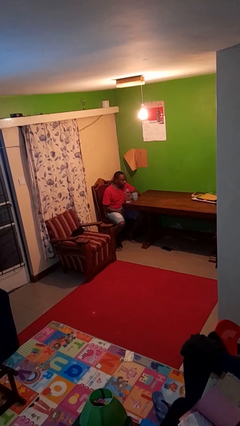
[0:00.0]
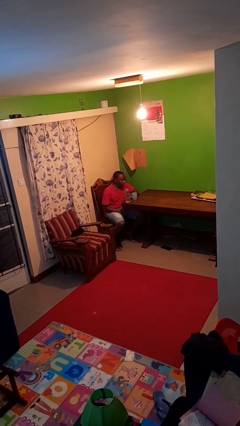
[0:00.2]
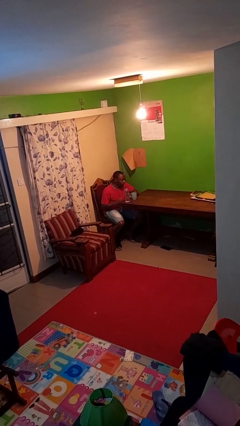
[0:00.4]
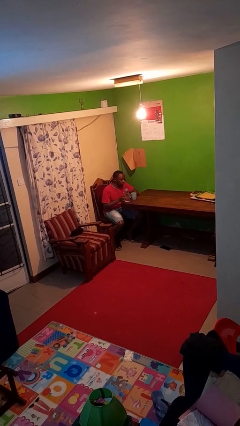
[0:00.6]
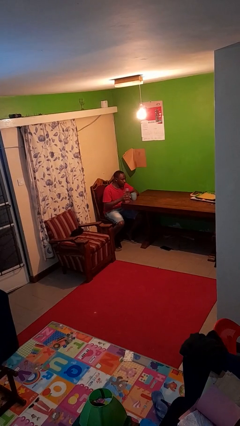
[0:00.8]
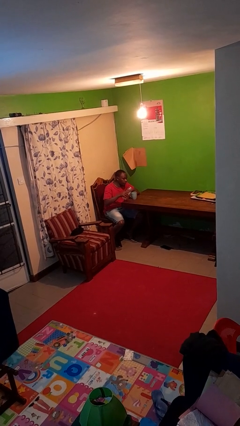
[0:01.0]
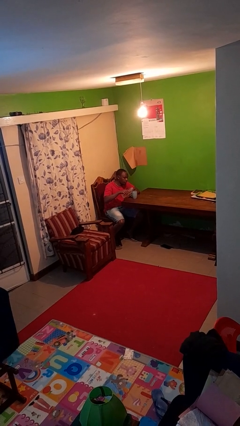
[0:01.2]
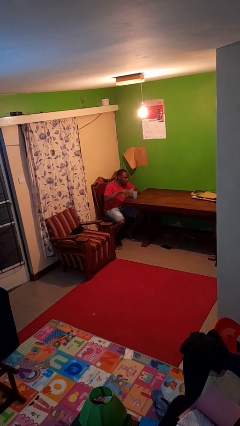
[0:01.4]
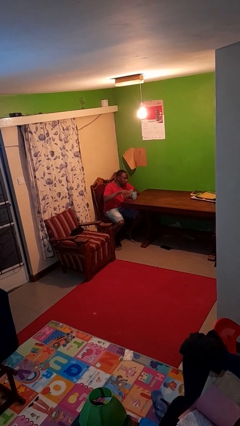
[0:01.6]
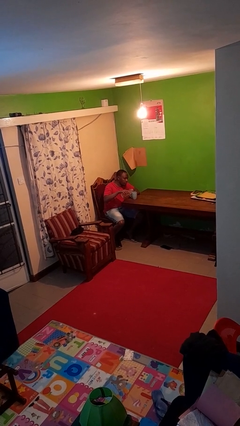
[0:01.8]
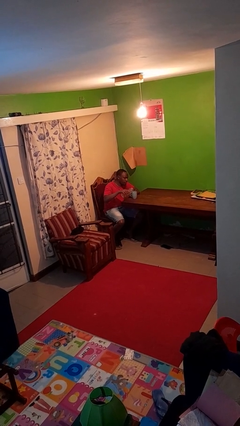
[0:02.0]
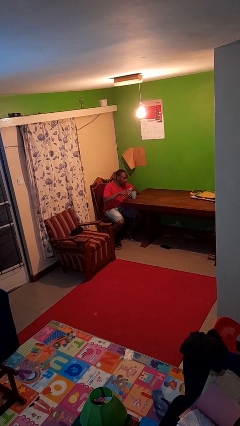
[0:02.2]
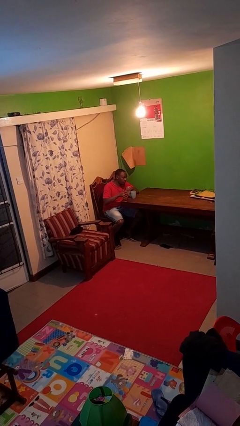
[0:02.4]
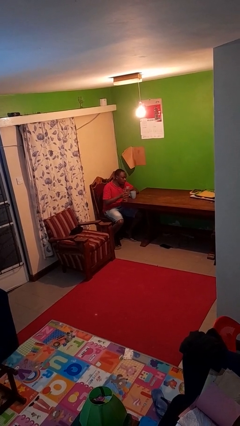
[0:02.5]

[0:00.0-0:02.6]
person pours liquid into cup

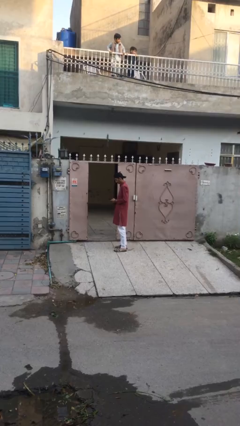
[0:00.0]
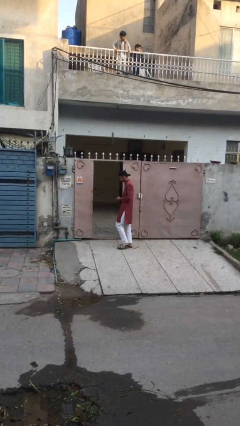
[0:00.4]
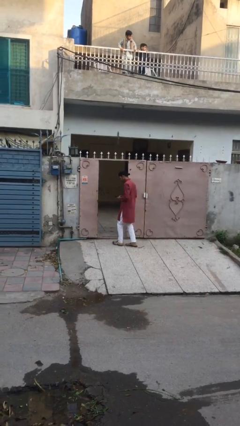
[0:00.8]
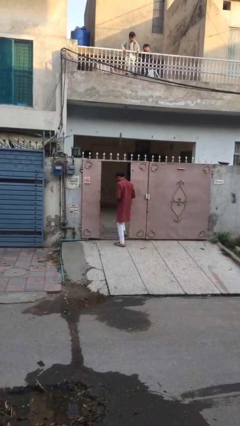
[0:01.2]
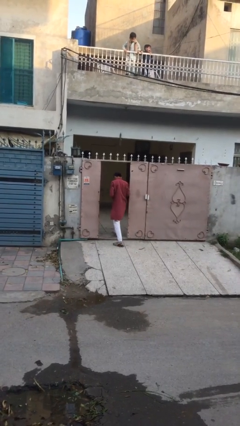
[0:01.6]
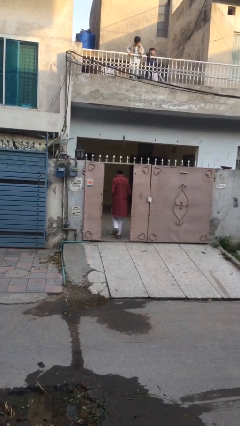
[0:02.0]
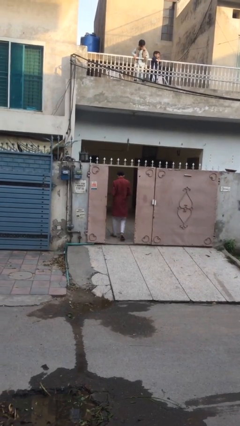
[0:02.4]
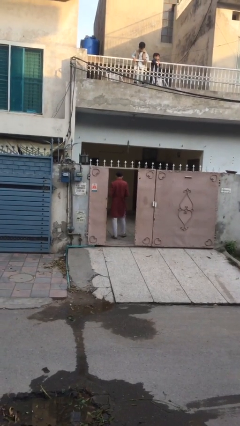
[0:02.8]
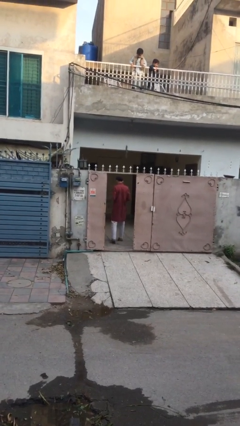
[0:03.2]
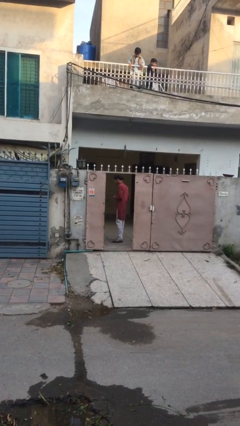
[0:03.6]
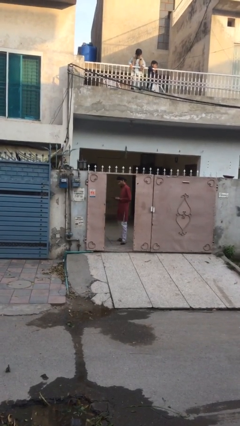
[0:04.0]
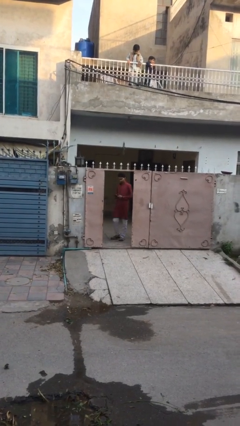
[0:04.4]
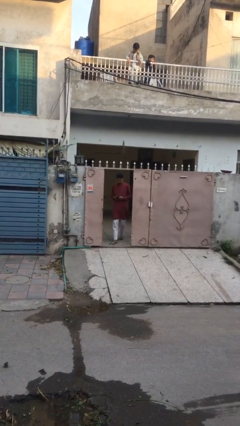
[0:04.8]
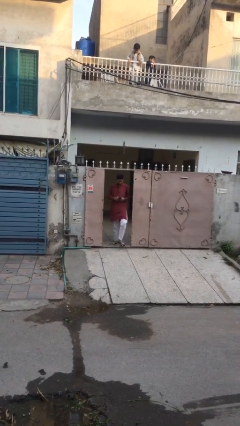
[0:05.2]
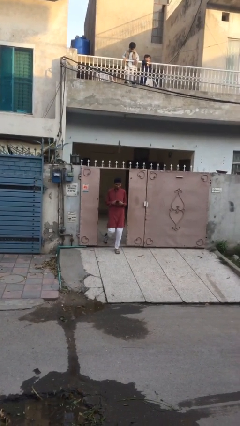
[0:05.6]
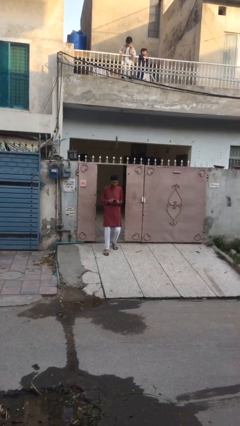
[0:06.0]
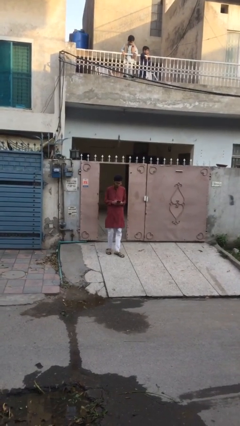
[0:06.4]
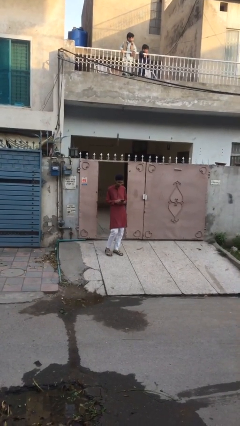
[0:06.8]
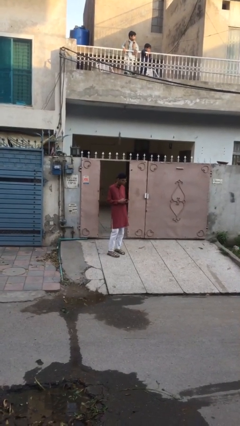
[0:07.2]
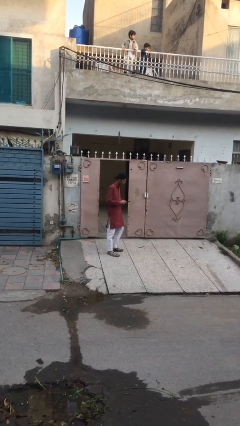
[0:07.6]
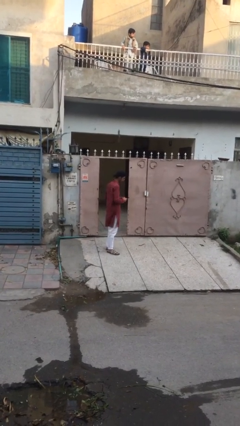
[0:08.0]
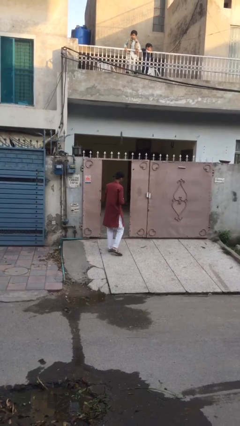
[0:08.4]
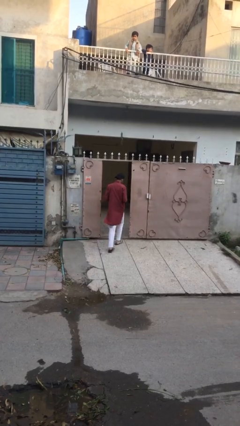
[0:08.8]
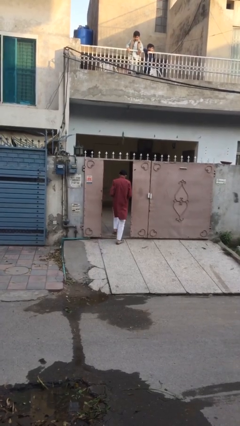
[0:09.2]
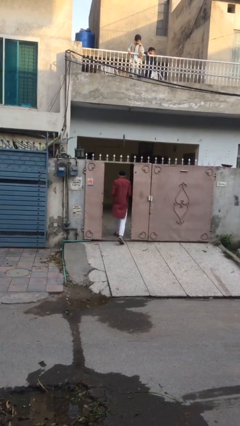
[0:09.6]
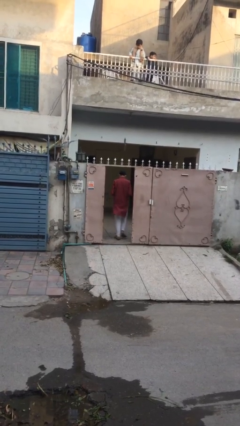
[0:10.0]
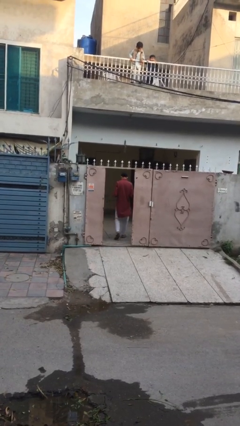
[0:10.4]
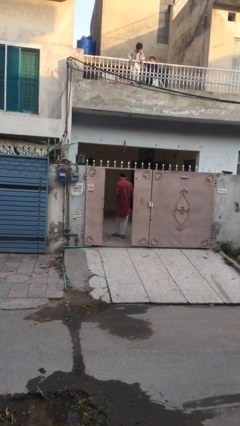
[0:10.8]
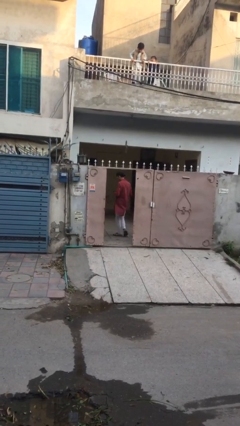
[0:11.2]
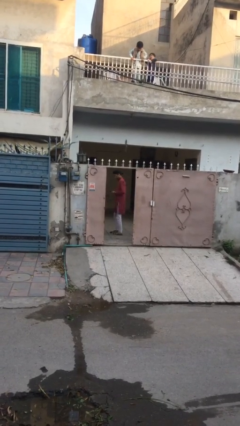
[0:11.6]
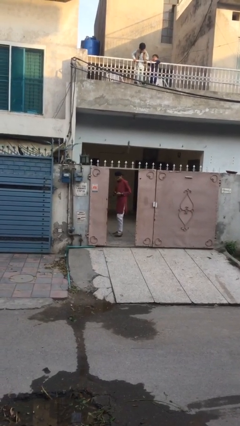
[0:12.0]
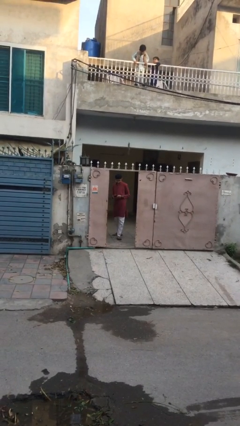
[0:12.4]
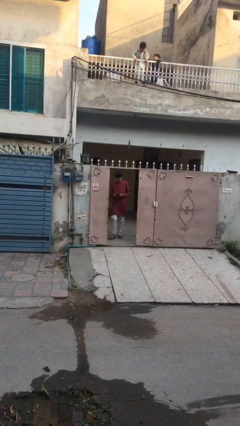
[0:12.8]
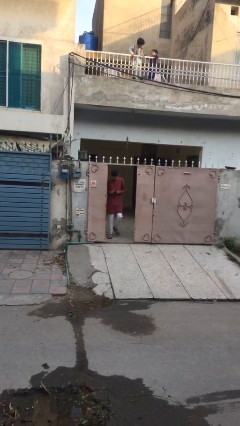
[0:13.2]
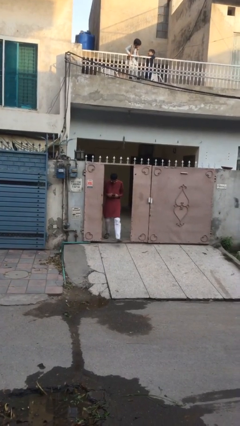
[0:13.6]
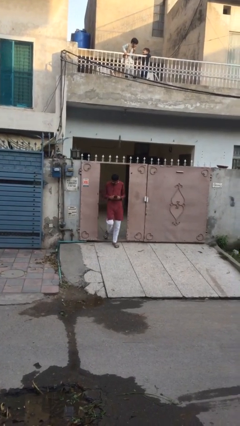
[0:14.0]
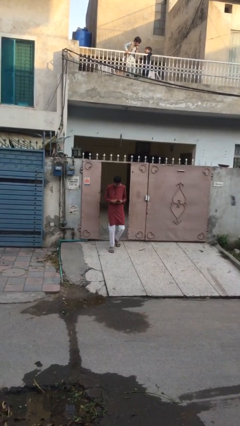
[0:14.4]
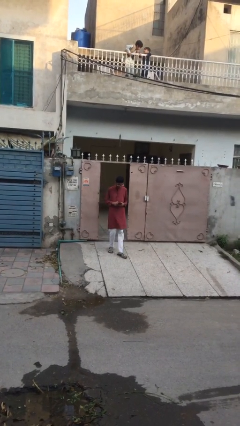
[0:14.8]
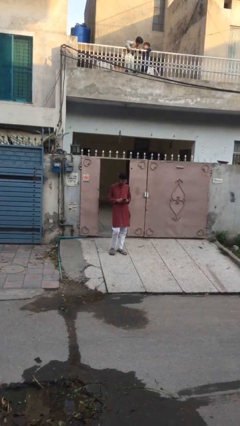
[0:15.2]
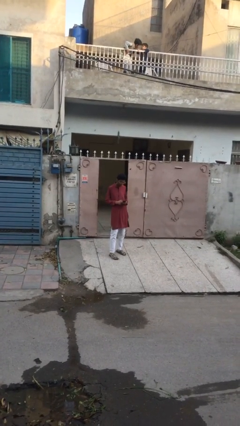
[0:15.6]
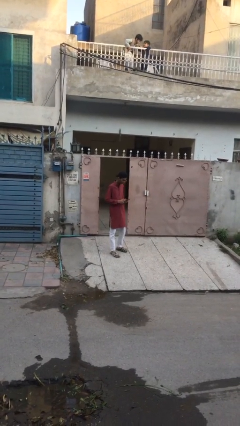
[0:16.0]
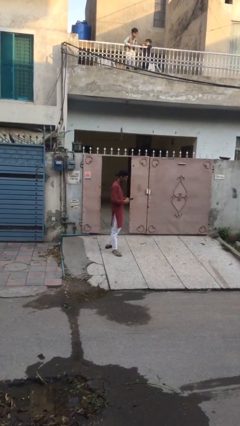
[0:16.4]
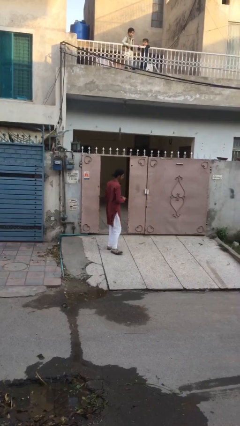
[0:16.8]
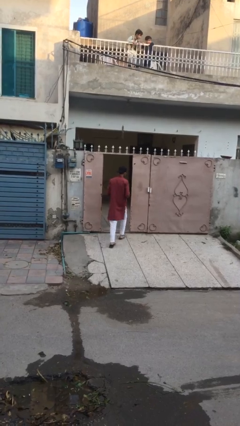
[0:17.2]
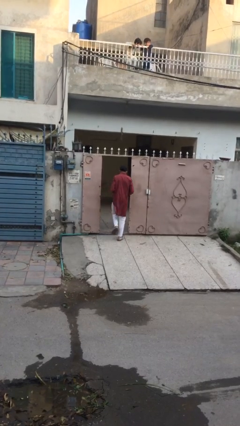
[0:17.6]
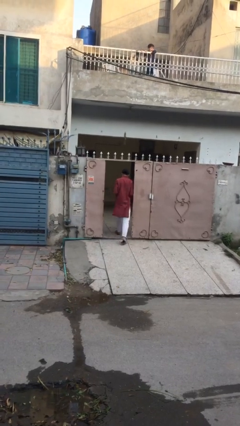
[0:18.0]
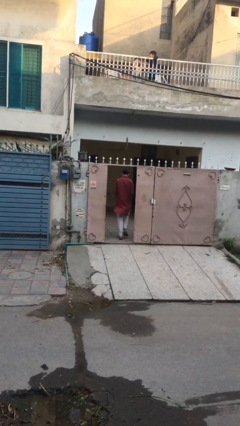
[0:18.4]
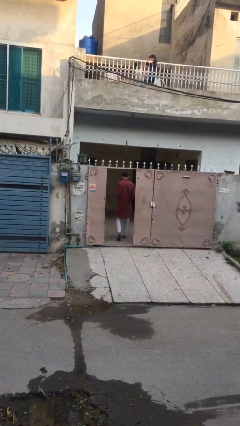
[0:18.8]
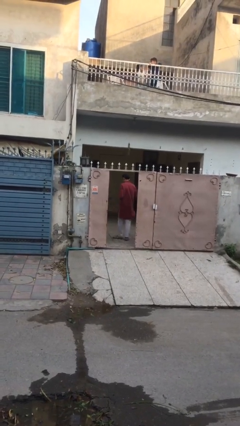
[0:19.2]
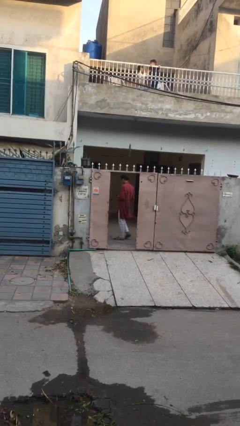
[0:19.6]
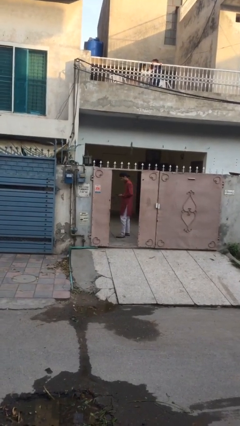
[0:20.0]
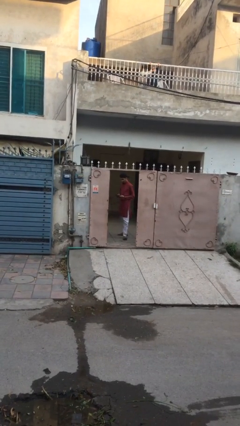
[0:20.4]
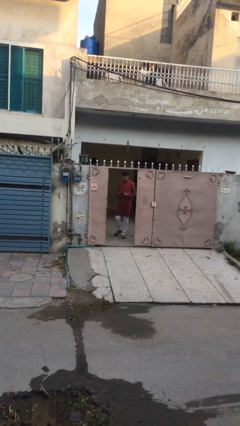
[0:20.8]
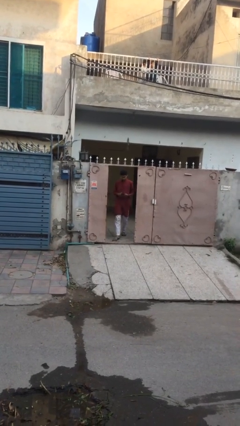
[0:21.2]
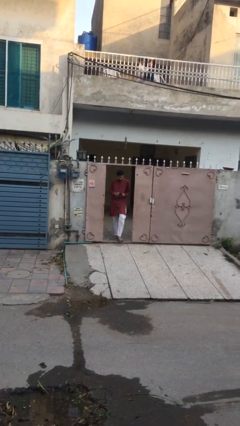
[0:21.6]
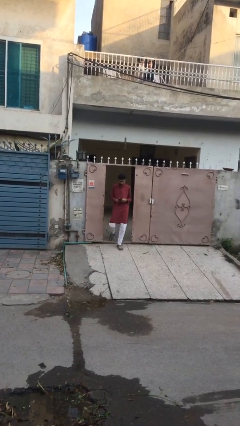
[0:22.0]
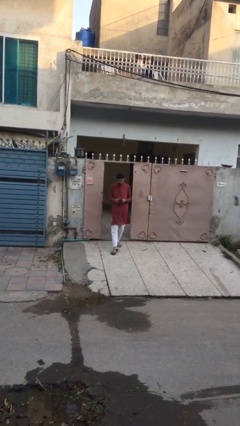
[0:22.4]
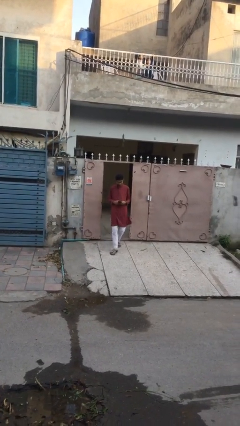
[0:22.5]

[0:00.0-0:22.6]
person texts on phone

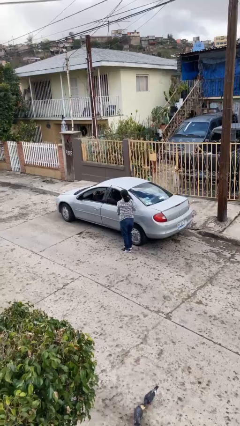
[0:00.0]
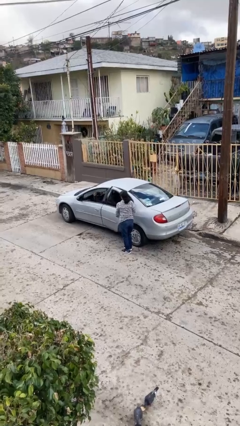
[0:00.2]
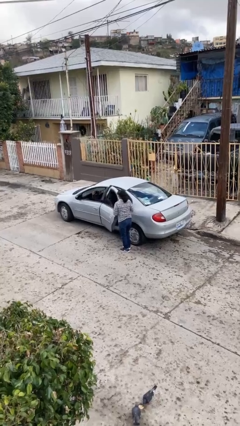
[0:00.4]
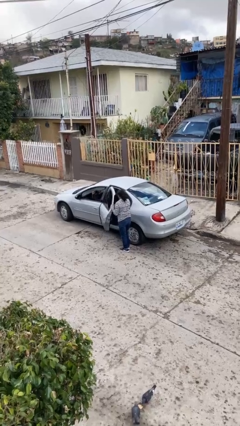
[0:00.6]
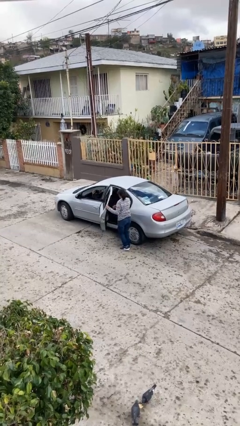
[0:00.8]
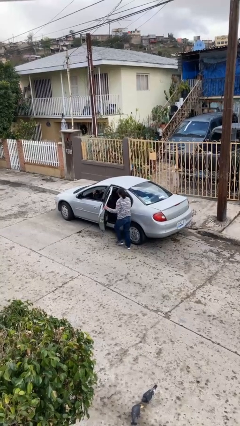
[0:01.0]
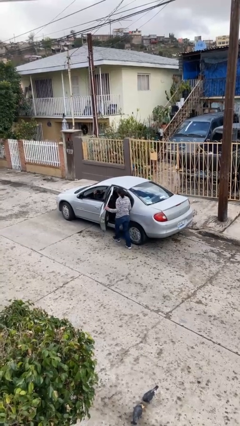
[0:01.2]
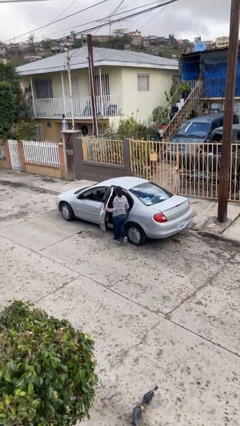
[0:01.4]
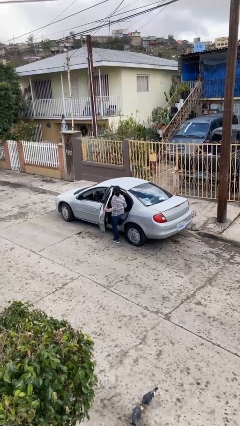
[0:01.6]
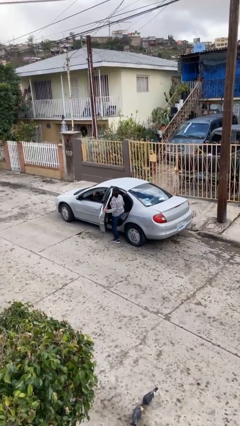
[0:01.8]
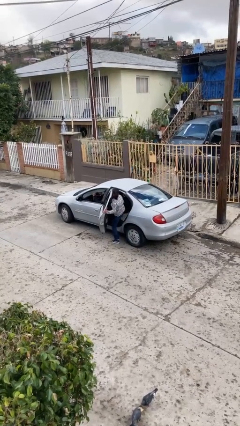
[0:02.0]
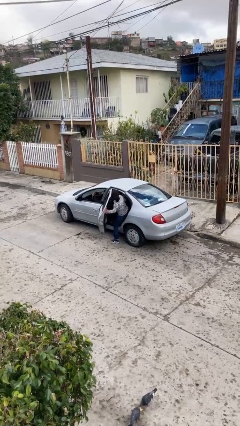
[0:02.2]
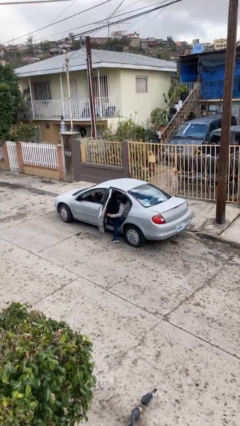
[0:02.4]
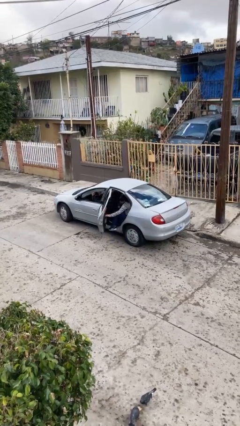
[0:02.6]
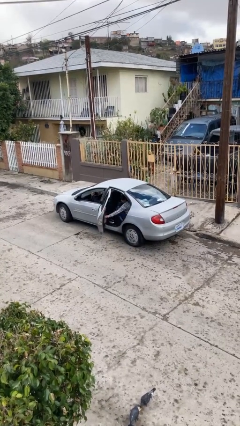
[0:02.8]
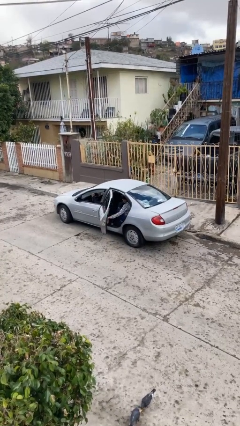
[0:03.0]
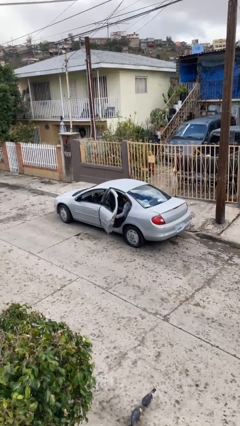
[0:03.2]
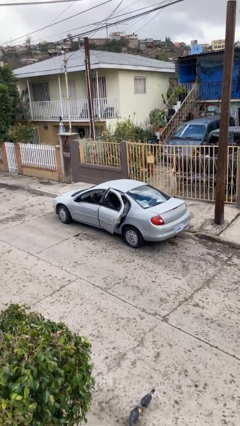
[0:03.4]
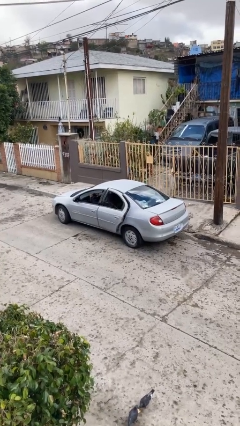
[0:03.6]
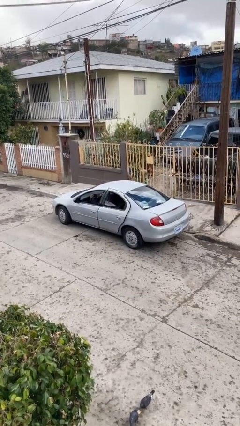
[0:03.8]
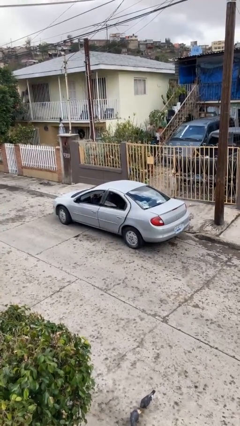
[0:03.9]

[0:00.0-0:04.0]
car picks up person

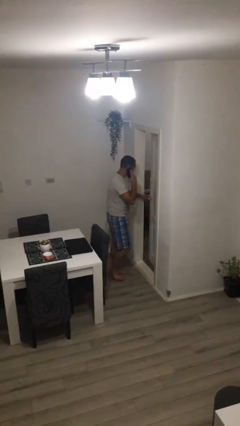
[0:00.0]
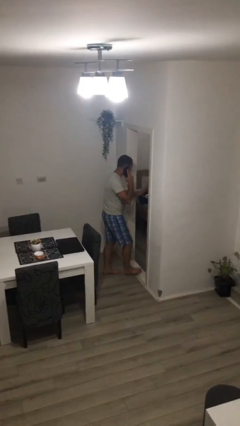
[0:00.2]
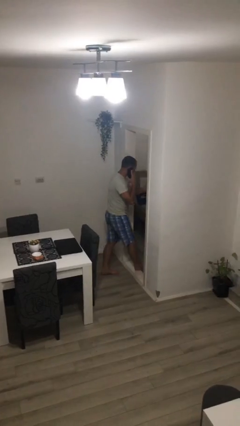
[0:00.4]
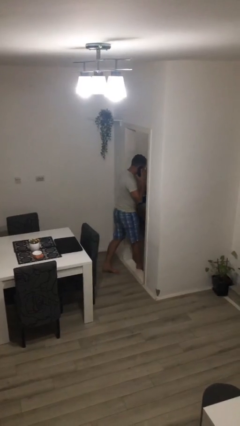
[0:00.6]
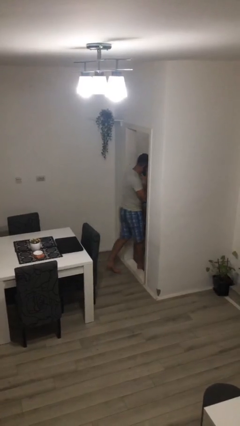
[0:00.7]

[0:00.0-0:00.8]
person opens facility door
